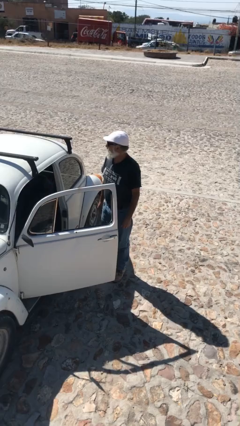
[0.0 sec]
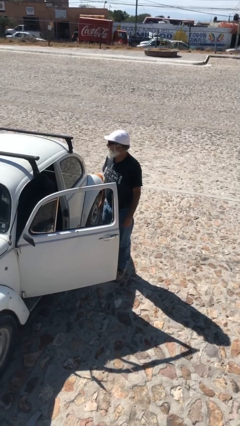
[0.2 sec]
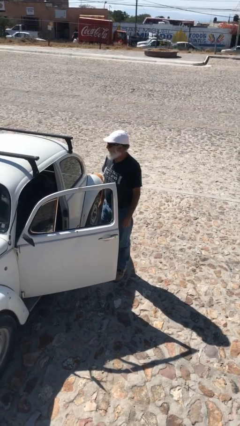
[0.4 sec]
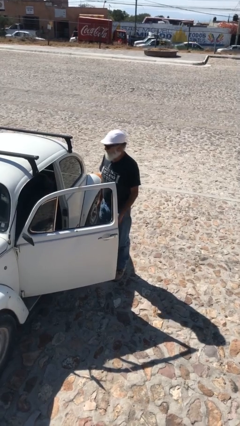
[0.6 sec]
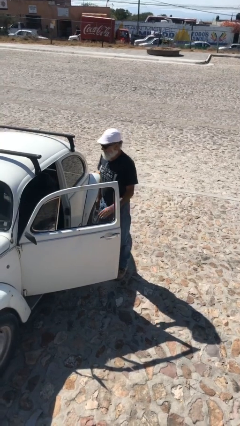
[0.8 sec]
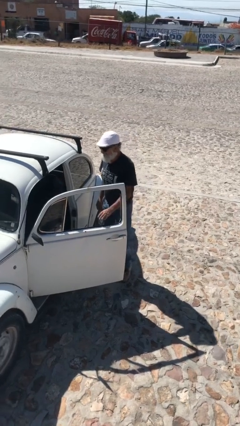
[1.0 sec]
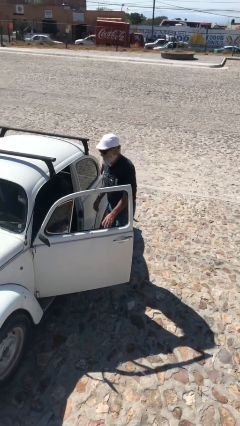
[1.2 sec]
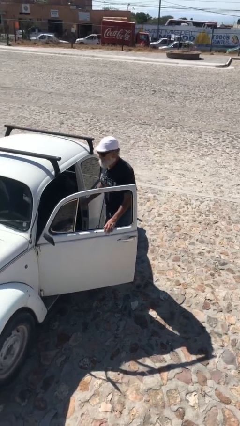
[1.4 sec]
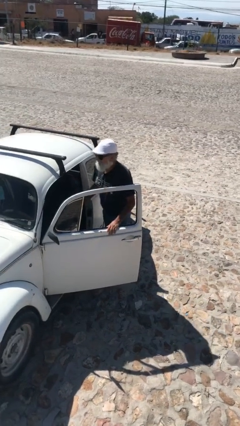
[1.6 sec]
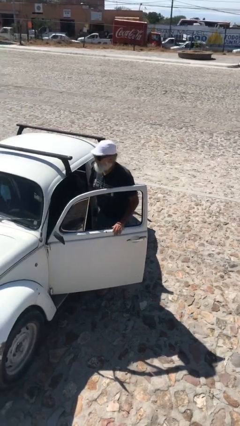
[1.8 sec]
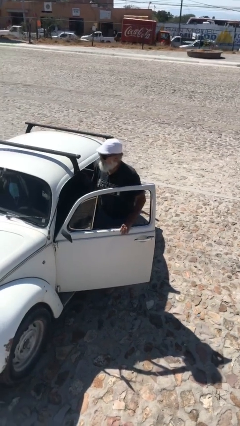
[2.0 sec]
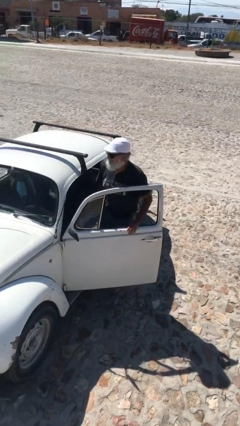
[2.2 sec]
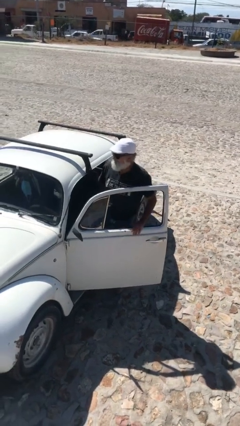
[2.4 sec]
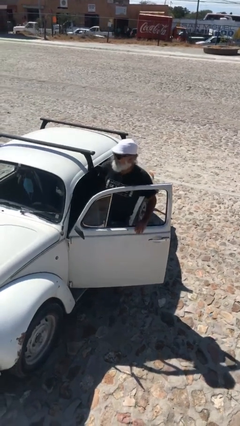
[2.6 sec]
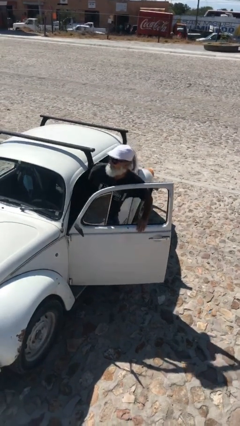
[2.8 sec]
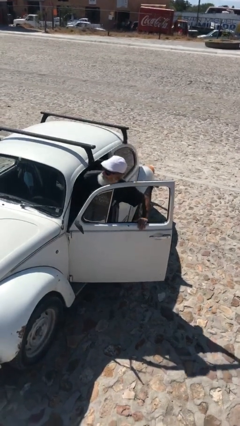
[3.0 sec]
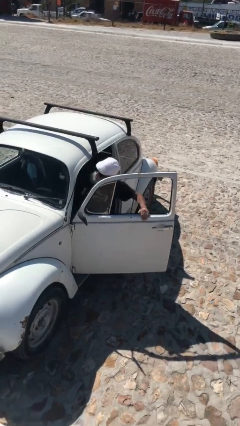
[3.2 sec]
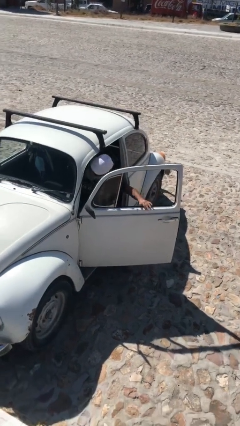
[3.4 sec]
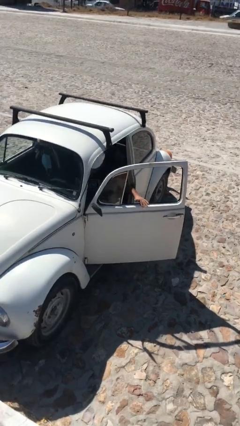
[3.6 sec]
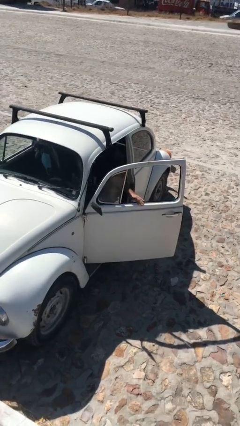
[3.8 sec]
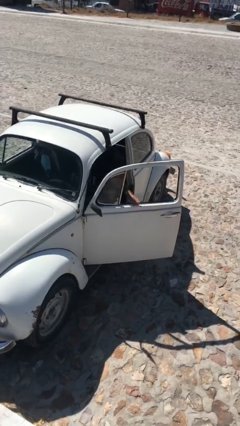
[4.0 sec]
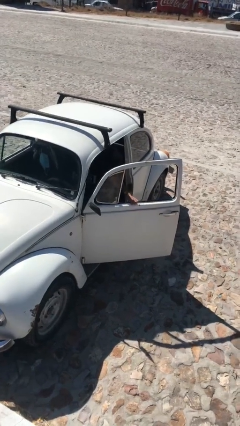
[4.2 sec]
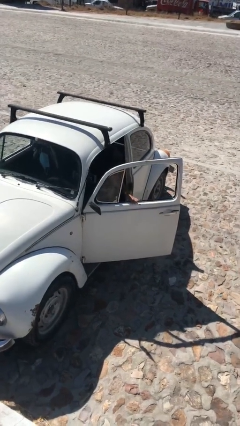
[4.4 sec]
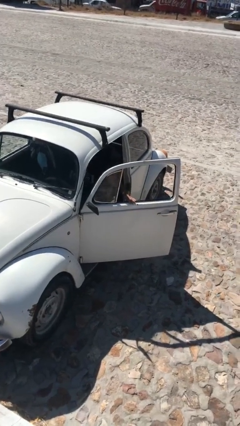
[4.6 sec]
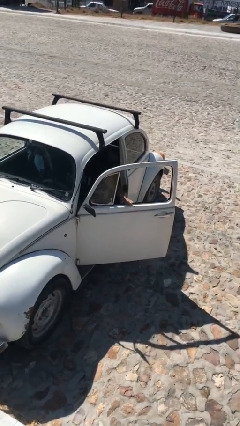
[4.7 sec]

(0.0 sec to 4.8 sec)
person enters car

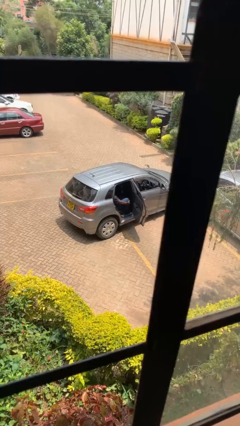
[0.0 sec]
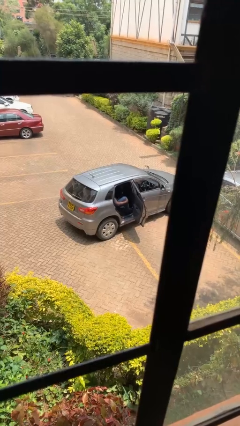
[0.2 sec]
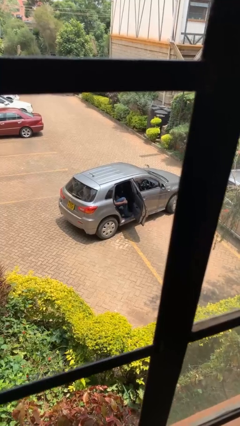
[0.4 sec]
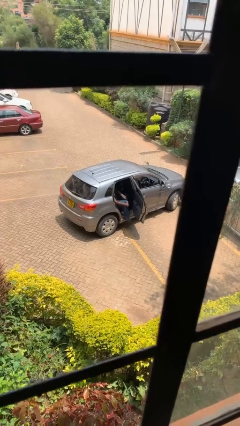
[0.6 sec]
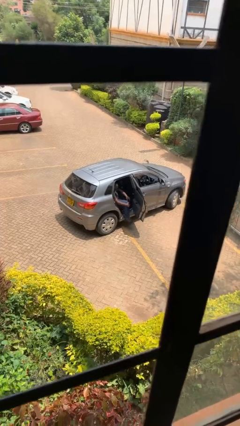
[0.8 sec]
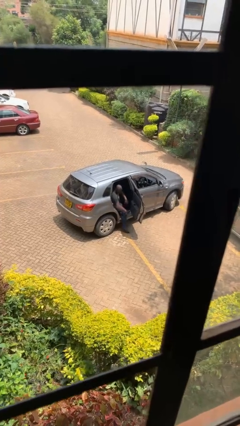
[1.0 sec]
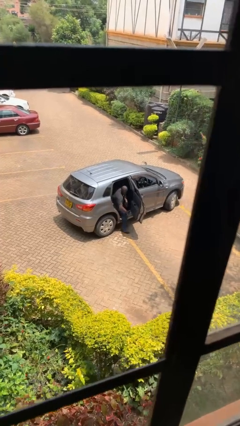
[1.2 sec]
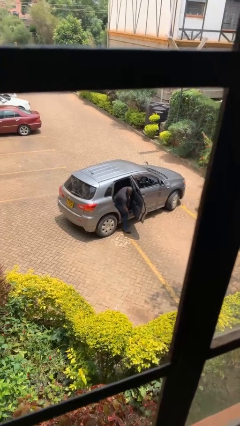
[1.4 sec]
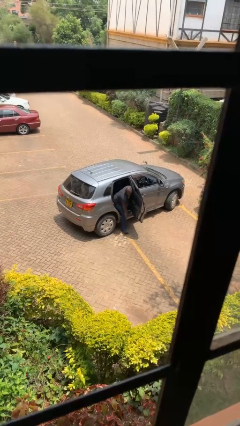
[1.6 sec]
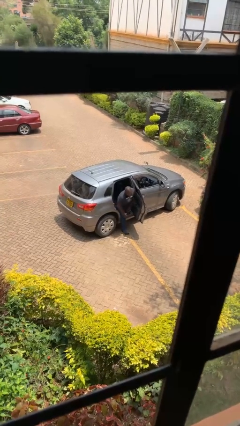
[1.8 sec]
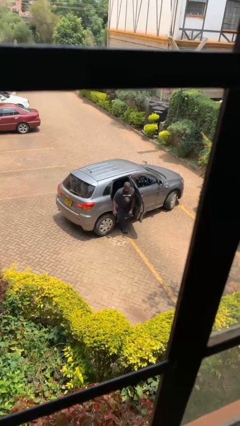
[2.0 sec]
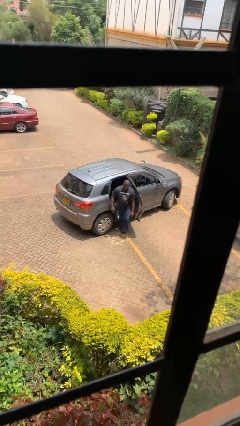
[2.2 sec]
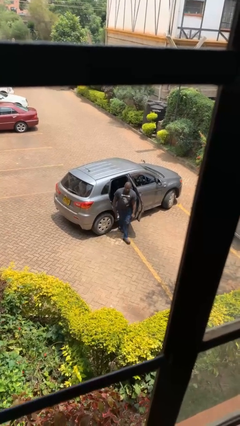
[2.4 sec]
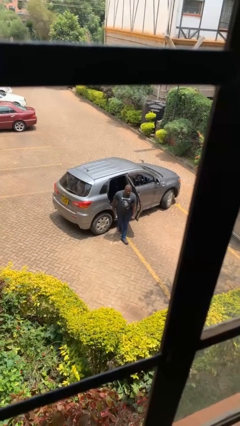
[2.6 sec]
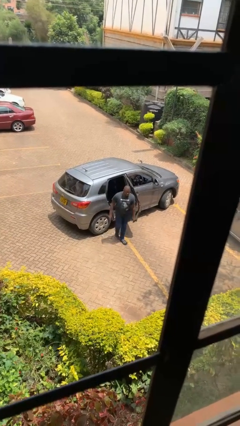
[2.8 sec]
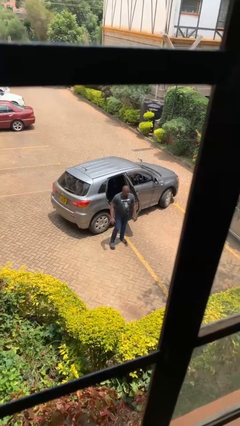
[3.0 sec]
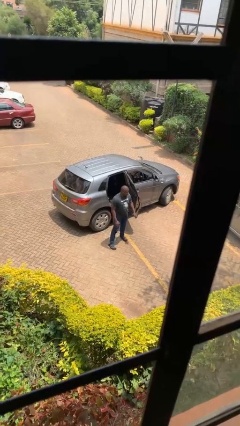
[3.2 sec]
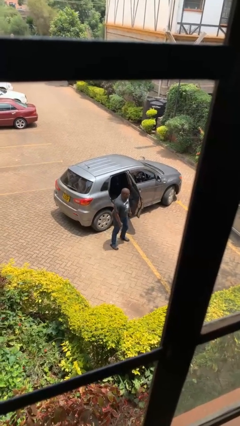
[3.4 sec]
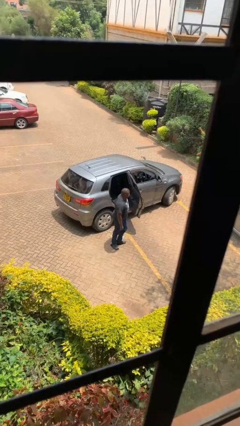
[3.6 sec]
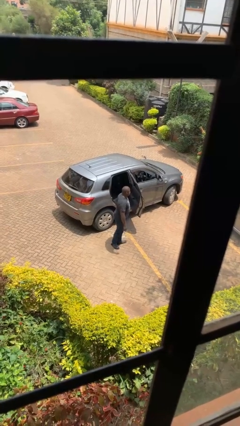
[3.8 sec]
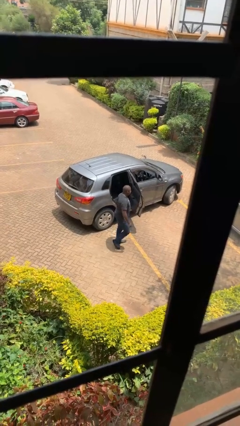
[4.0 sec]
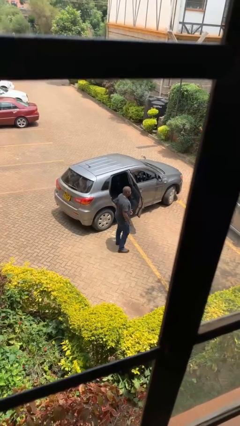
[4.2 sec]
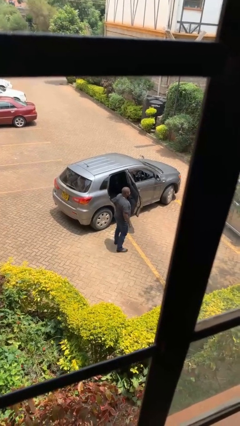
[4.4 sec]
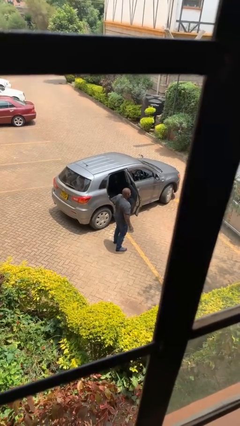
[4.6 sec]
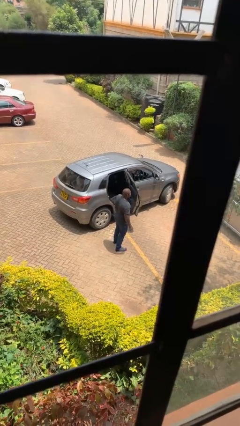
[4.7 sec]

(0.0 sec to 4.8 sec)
person exits car

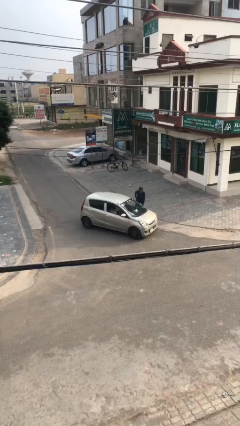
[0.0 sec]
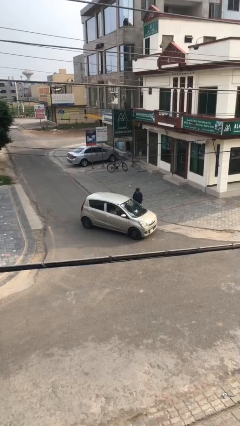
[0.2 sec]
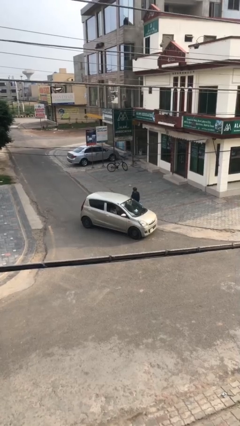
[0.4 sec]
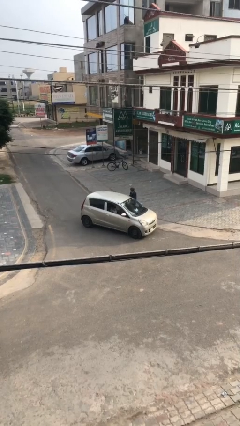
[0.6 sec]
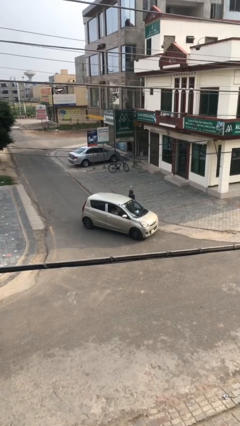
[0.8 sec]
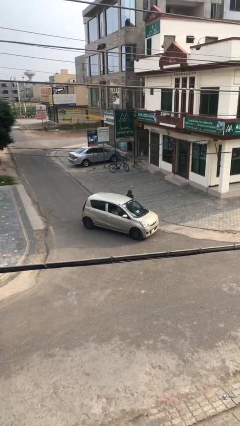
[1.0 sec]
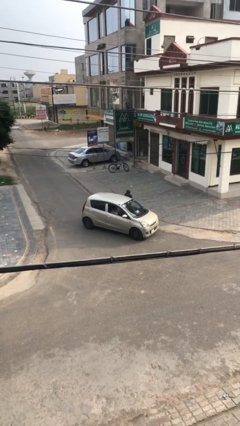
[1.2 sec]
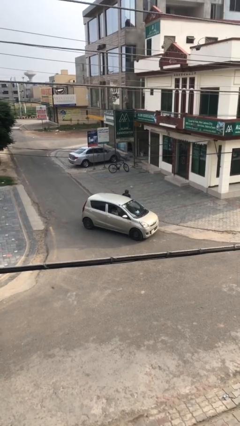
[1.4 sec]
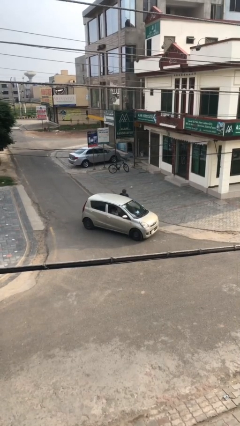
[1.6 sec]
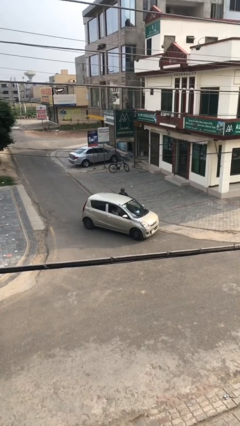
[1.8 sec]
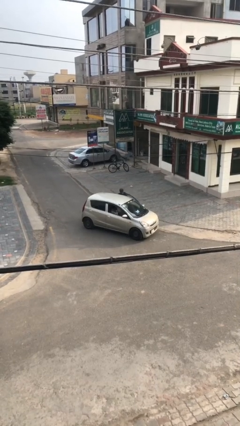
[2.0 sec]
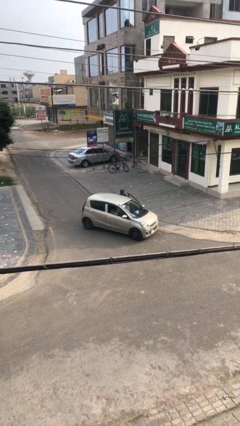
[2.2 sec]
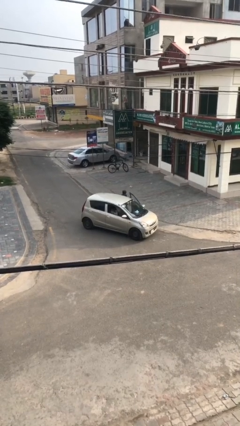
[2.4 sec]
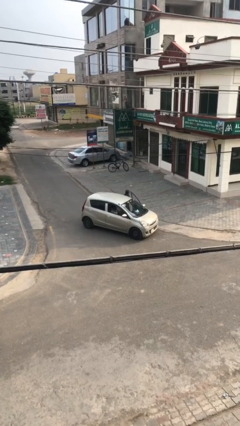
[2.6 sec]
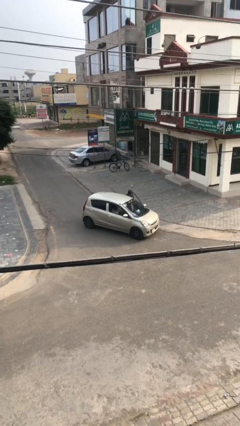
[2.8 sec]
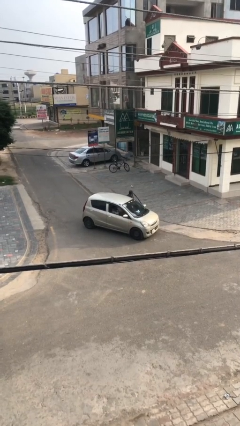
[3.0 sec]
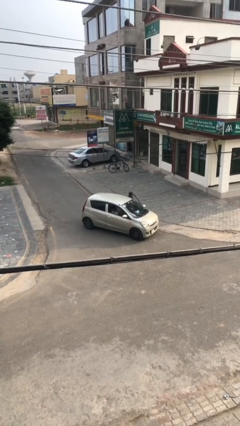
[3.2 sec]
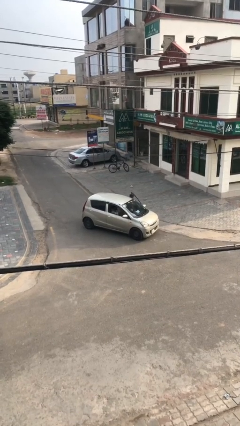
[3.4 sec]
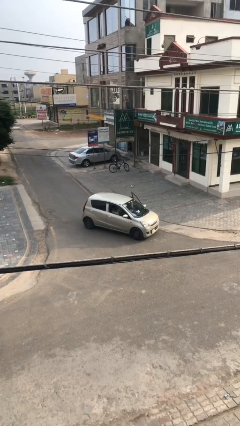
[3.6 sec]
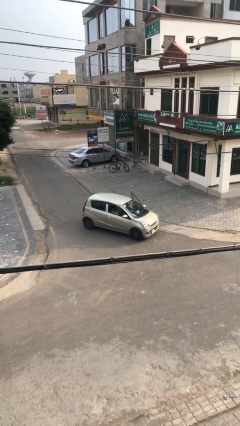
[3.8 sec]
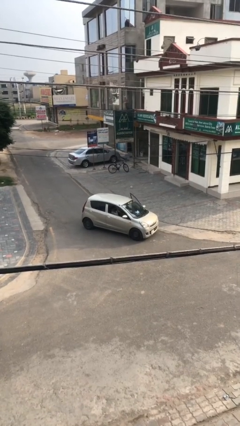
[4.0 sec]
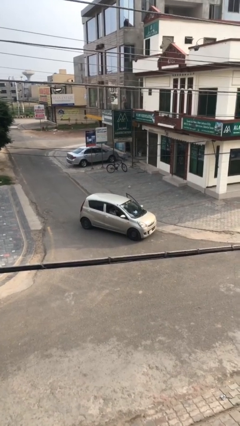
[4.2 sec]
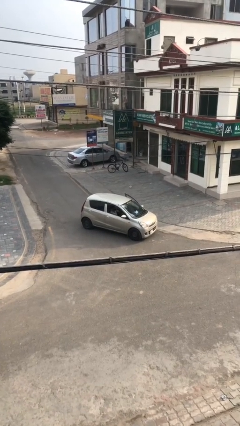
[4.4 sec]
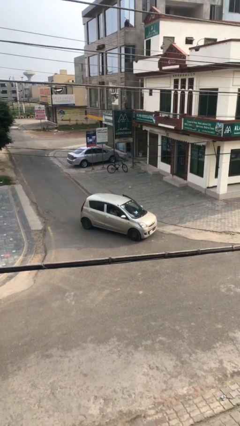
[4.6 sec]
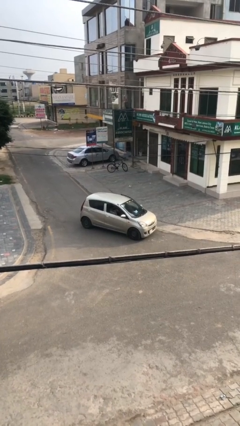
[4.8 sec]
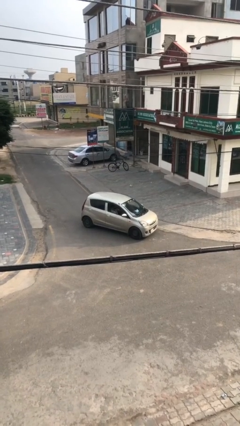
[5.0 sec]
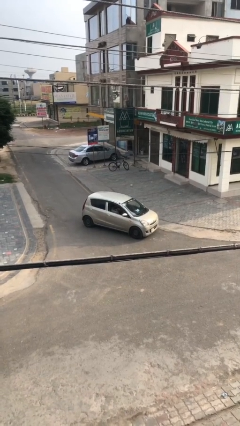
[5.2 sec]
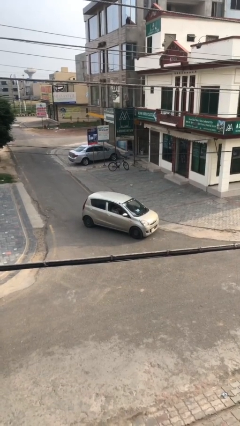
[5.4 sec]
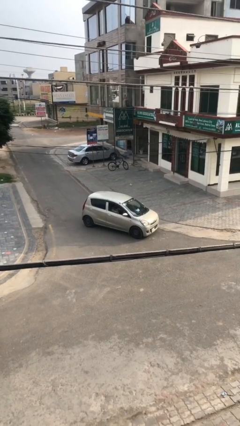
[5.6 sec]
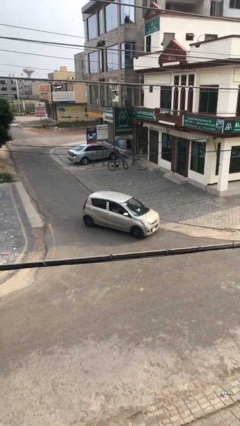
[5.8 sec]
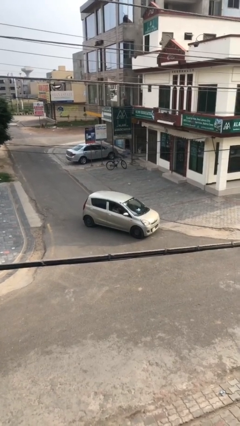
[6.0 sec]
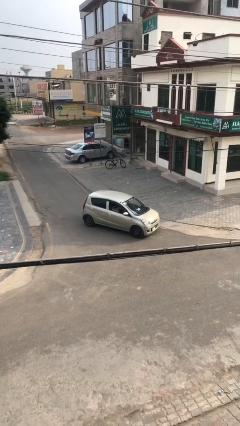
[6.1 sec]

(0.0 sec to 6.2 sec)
car picks up person

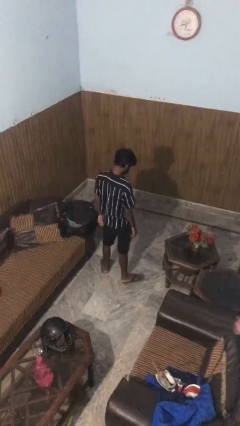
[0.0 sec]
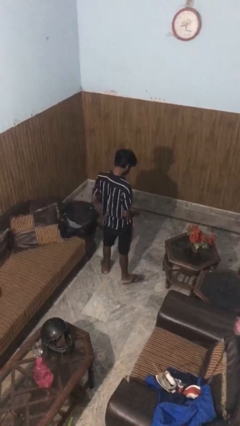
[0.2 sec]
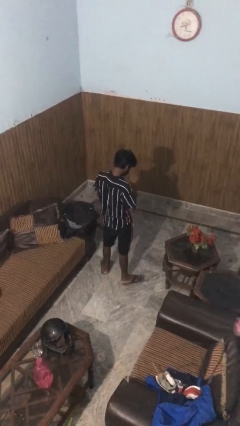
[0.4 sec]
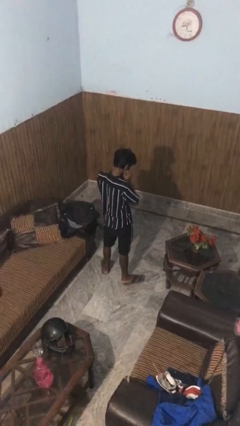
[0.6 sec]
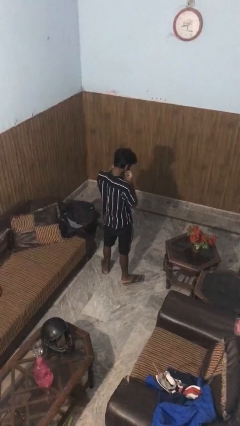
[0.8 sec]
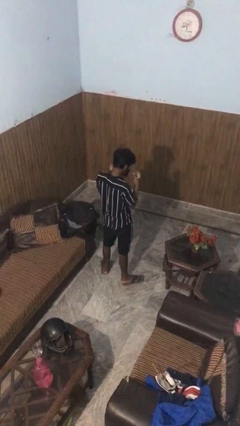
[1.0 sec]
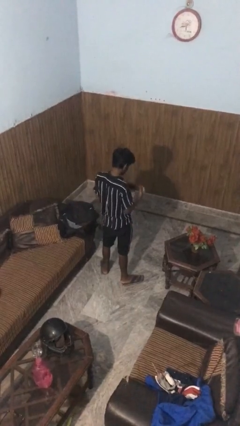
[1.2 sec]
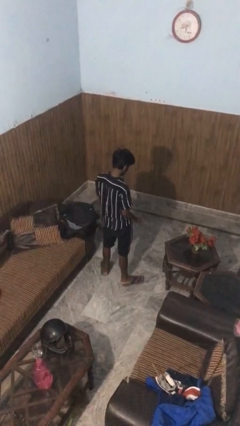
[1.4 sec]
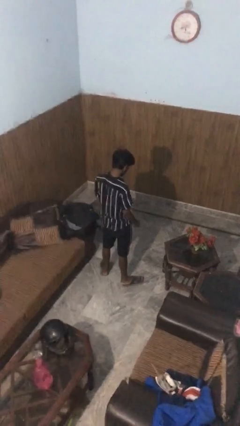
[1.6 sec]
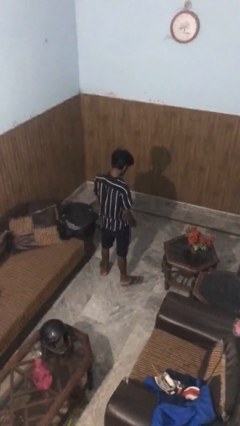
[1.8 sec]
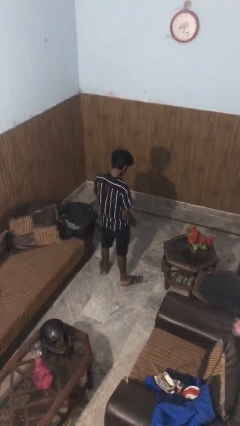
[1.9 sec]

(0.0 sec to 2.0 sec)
person takes off facemask

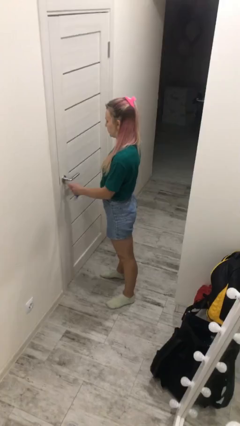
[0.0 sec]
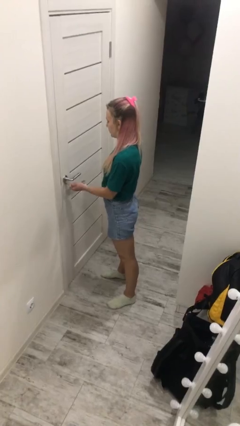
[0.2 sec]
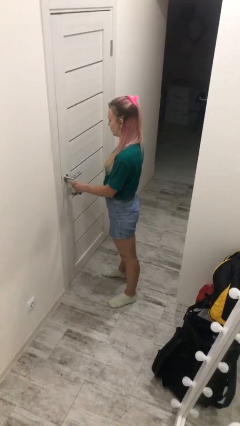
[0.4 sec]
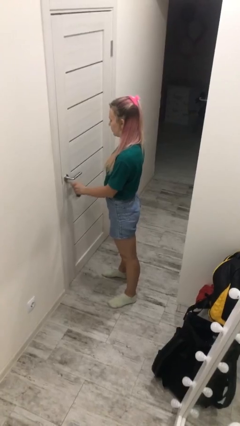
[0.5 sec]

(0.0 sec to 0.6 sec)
person locks door with keys
